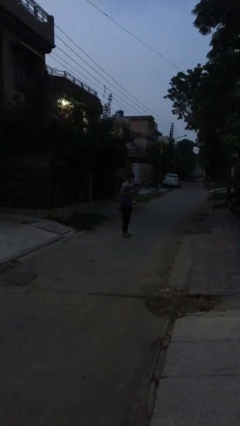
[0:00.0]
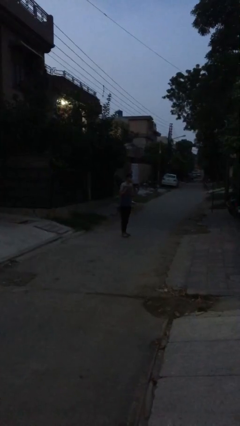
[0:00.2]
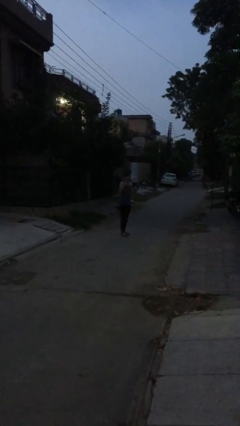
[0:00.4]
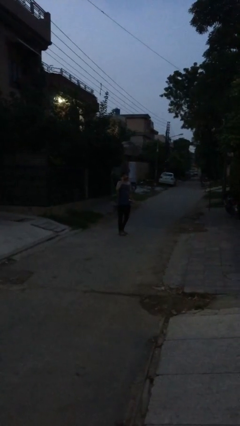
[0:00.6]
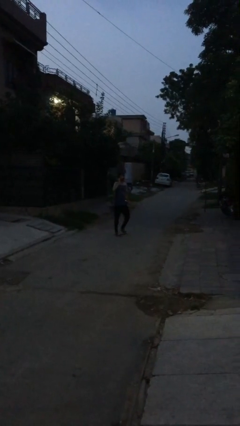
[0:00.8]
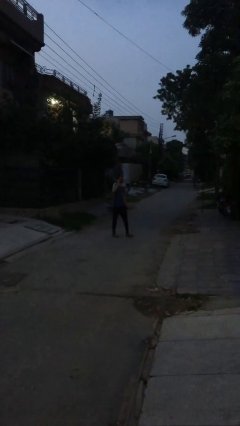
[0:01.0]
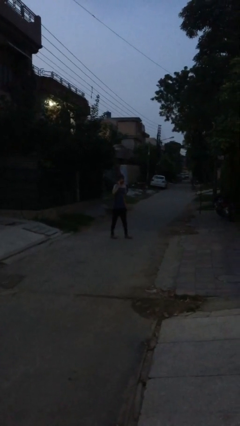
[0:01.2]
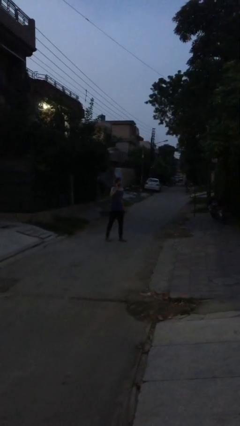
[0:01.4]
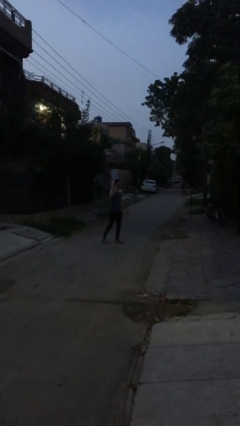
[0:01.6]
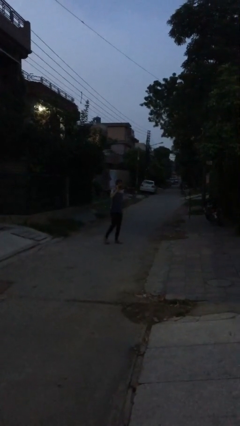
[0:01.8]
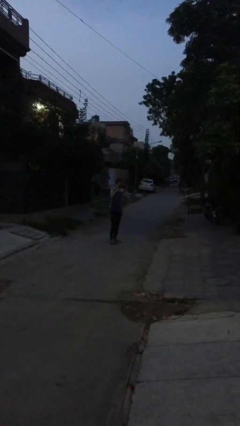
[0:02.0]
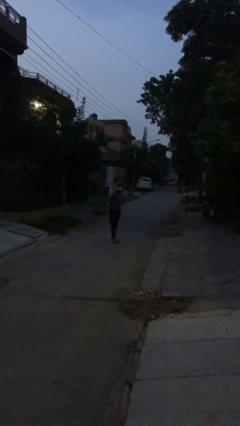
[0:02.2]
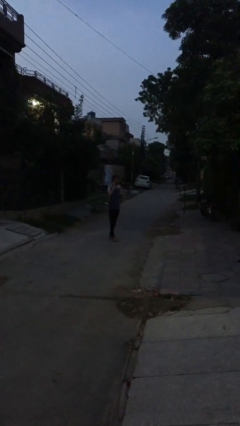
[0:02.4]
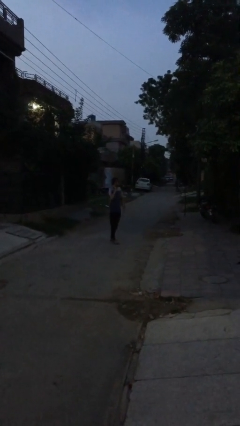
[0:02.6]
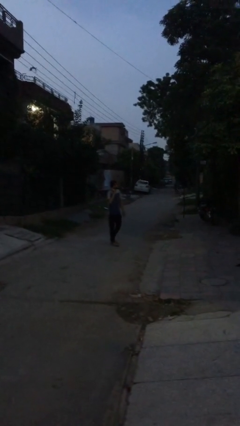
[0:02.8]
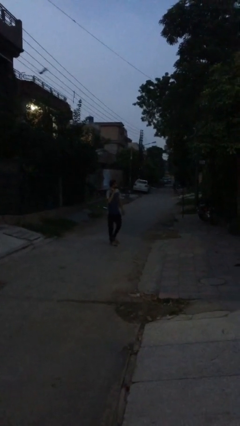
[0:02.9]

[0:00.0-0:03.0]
person talks on phone

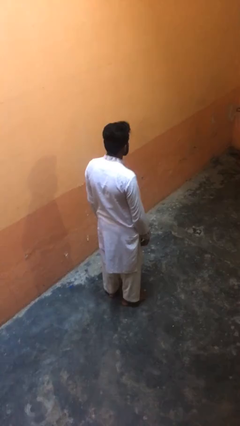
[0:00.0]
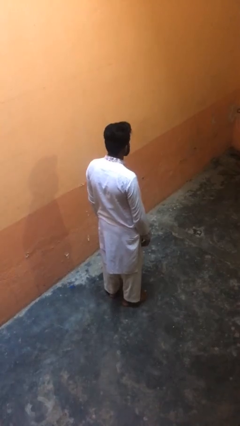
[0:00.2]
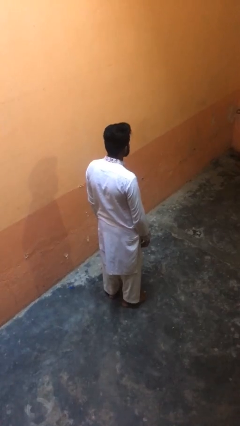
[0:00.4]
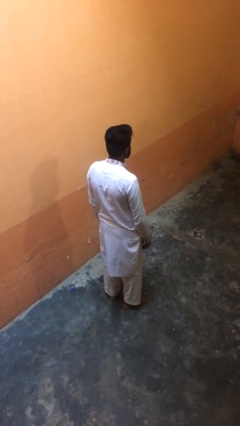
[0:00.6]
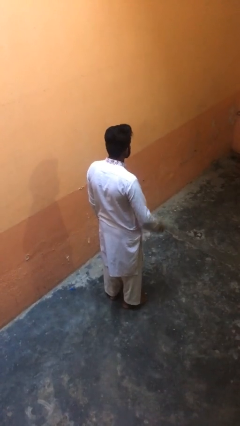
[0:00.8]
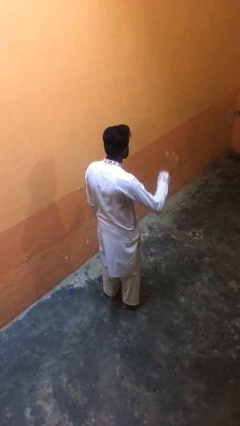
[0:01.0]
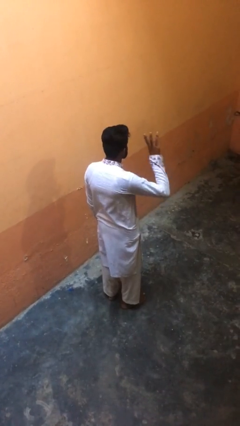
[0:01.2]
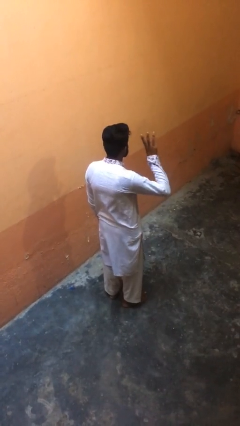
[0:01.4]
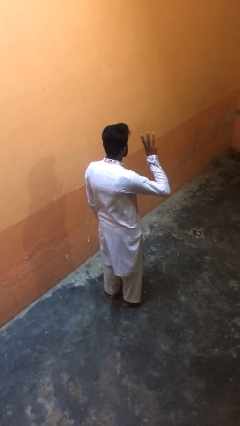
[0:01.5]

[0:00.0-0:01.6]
person gestures number three

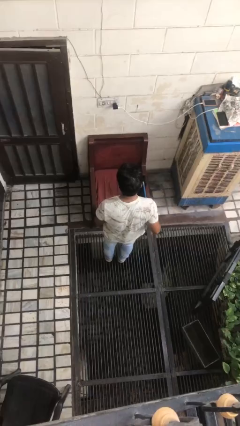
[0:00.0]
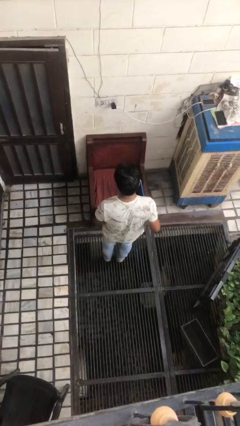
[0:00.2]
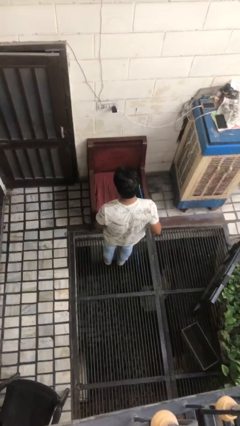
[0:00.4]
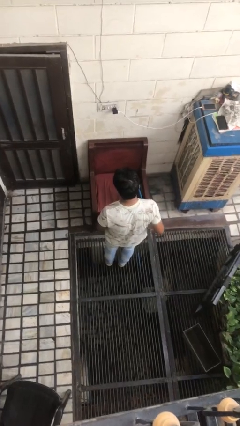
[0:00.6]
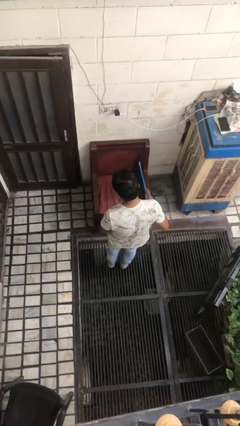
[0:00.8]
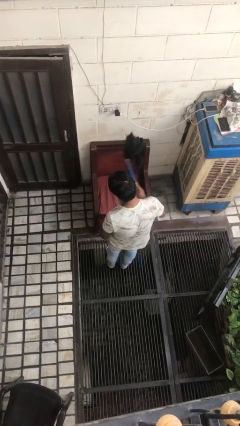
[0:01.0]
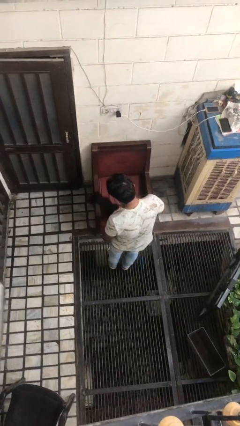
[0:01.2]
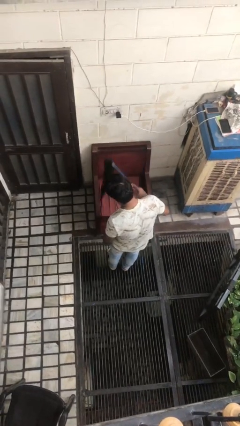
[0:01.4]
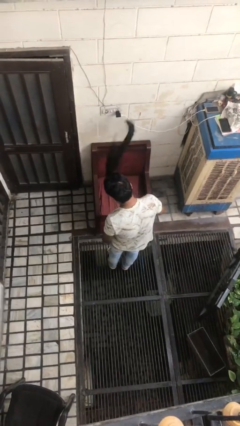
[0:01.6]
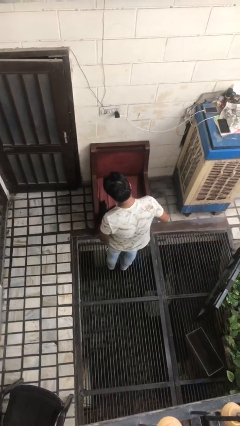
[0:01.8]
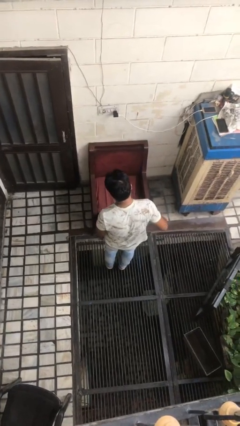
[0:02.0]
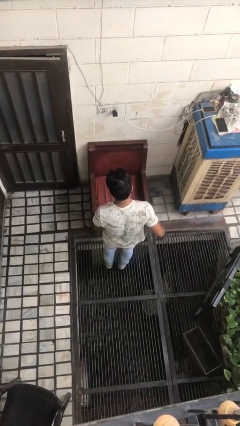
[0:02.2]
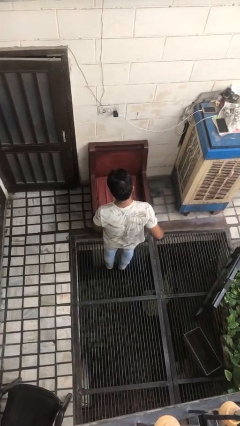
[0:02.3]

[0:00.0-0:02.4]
person dusts furniture

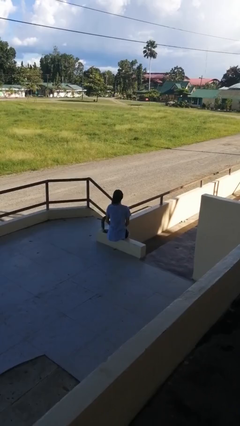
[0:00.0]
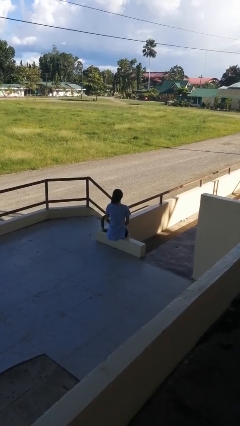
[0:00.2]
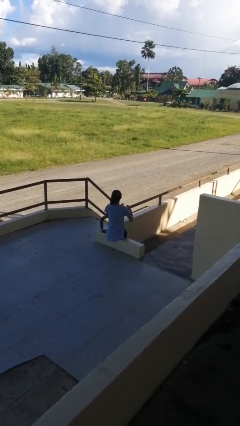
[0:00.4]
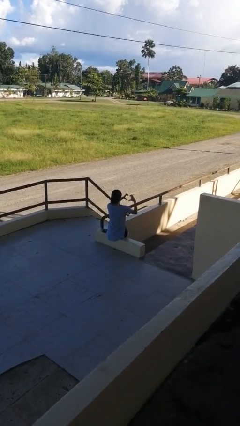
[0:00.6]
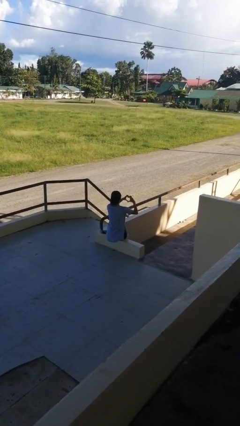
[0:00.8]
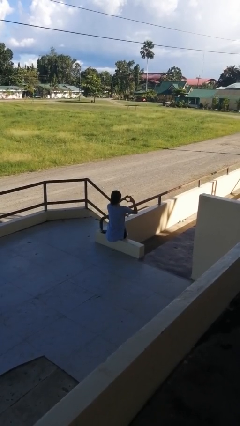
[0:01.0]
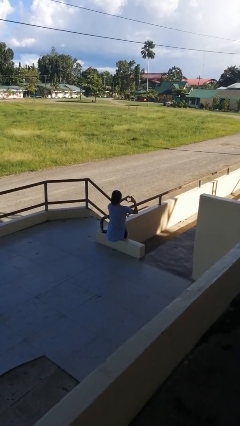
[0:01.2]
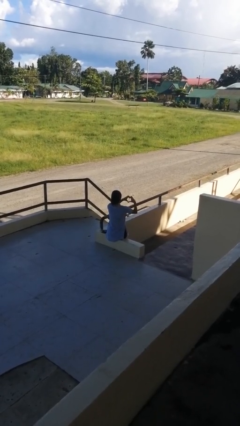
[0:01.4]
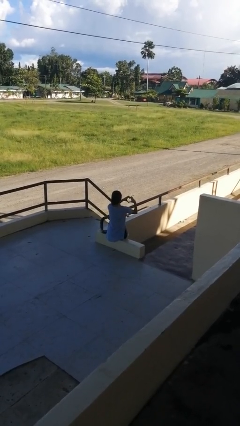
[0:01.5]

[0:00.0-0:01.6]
person gestures heart

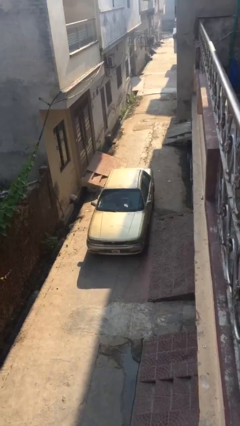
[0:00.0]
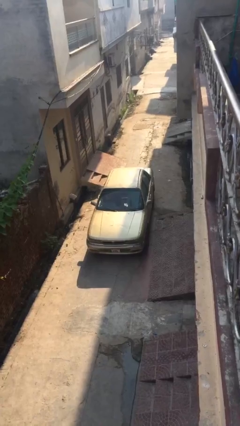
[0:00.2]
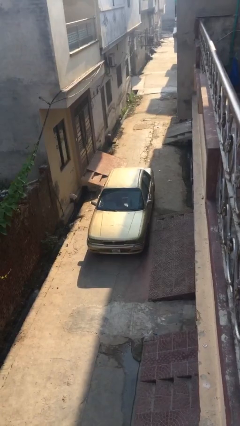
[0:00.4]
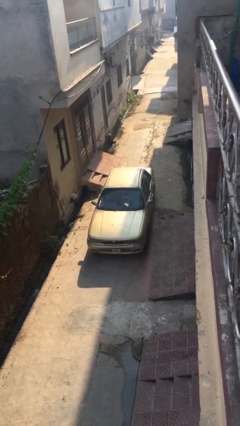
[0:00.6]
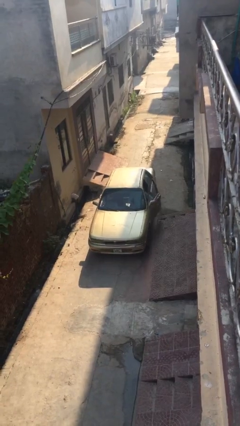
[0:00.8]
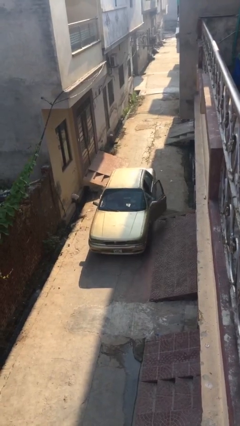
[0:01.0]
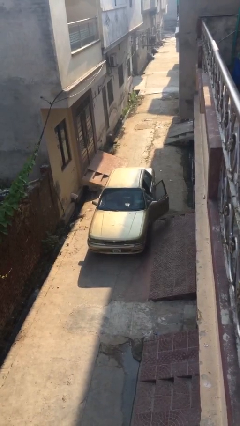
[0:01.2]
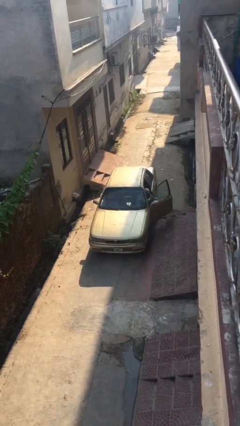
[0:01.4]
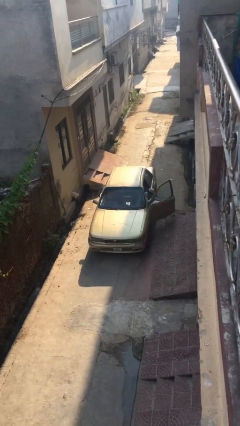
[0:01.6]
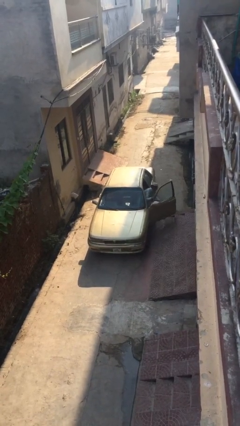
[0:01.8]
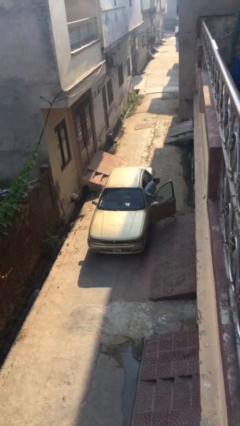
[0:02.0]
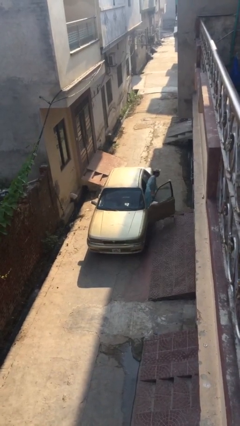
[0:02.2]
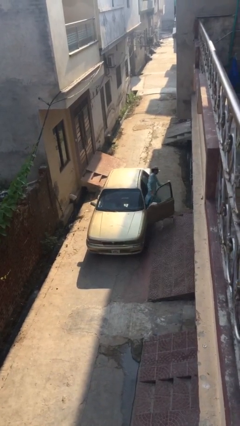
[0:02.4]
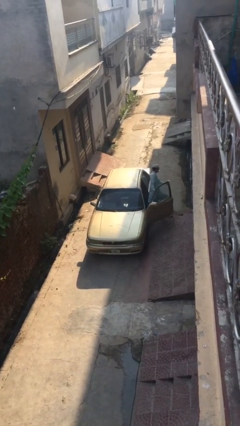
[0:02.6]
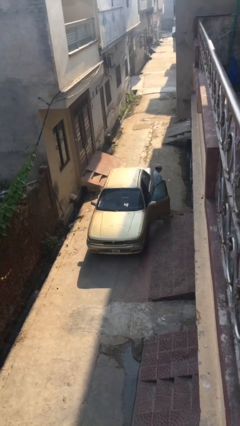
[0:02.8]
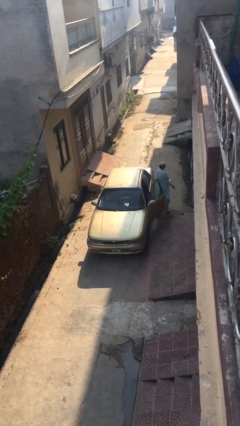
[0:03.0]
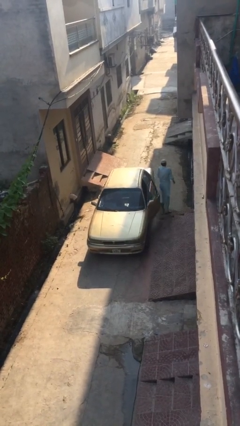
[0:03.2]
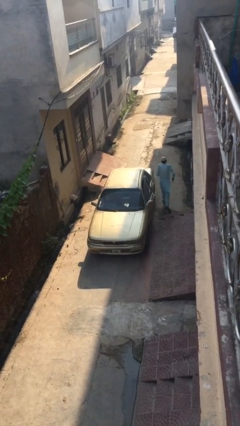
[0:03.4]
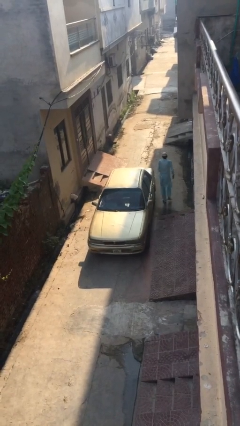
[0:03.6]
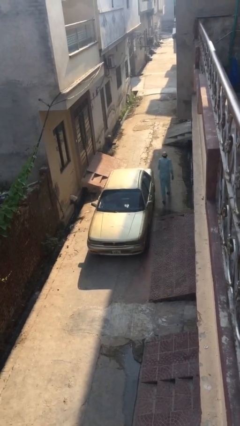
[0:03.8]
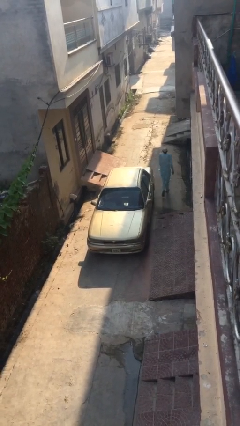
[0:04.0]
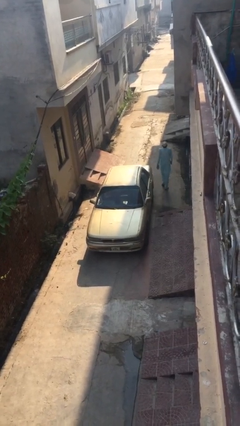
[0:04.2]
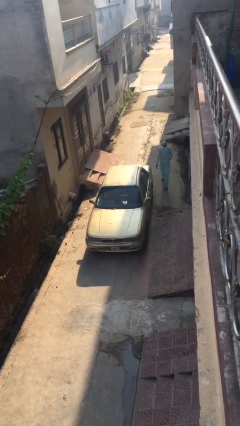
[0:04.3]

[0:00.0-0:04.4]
car drops off person

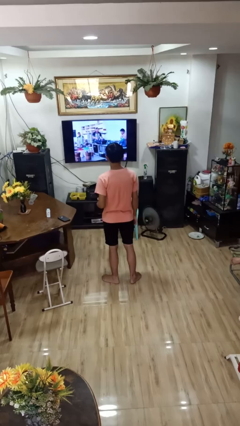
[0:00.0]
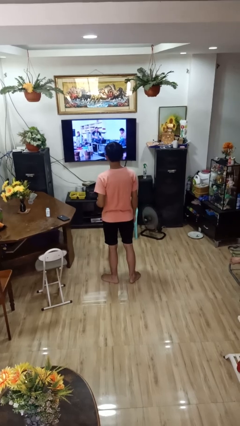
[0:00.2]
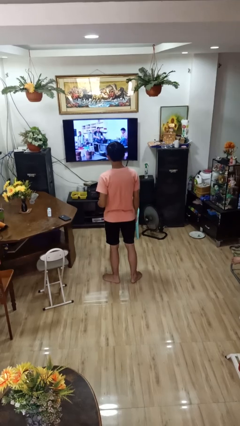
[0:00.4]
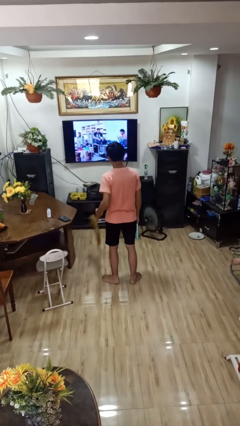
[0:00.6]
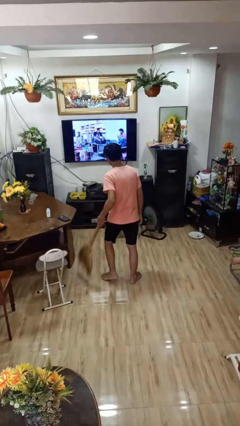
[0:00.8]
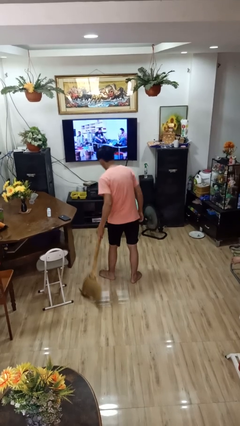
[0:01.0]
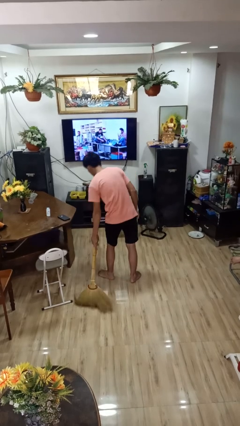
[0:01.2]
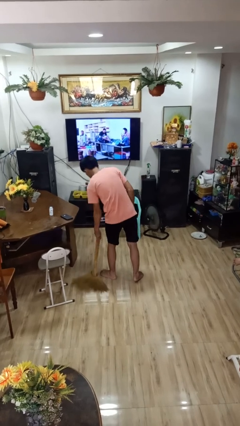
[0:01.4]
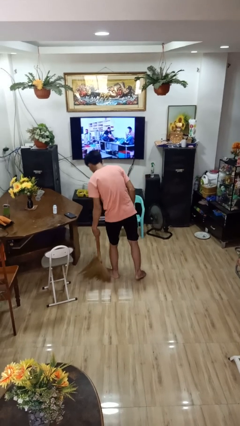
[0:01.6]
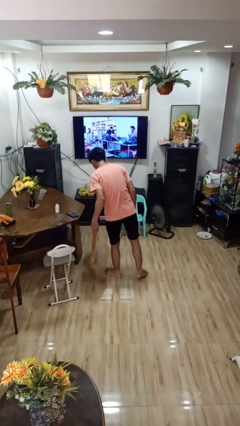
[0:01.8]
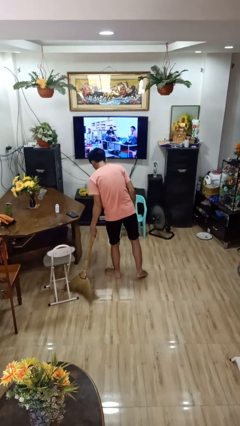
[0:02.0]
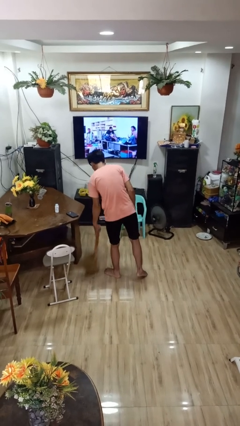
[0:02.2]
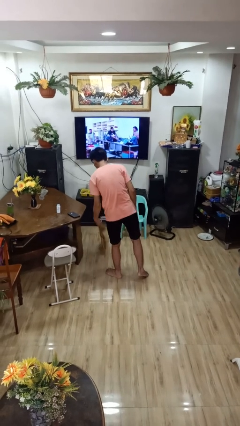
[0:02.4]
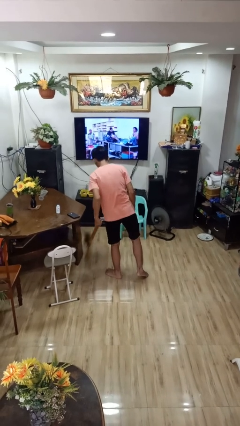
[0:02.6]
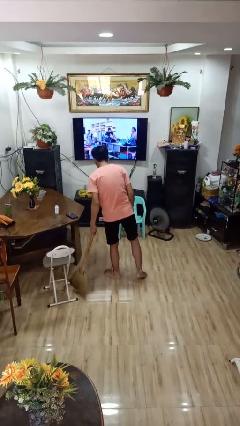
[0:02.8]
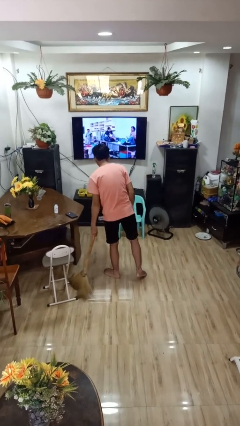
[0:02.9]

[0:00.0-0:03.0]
person sweeps floor

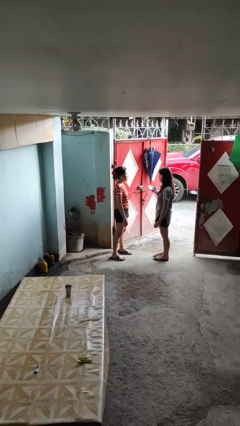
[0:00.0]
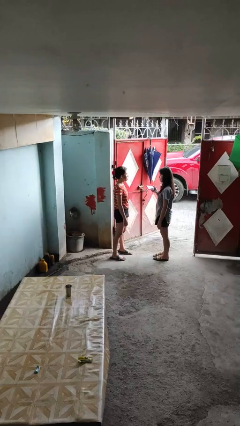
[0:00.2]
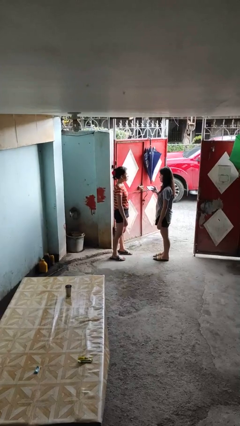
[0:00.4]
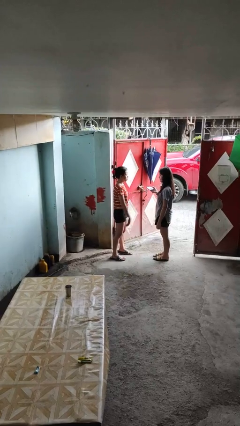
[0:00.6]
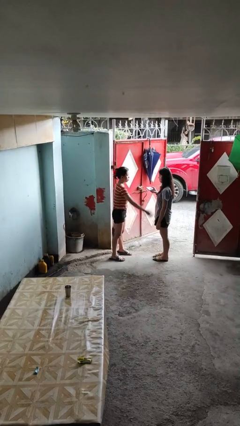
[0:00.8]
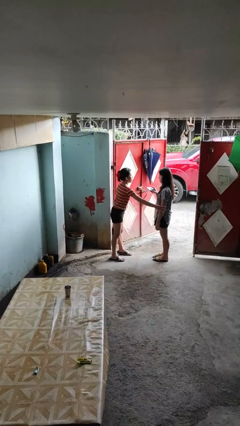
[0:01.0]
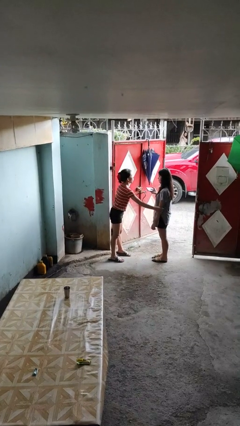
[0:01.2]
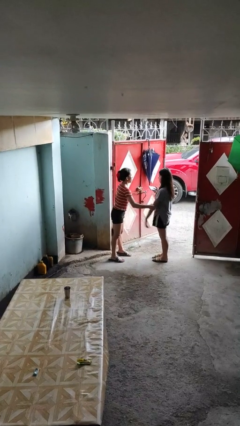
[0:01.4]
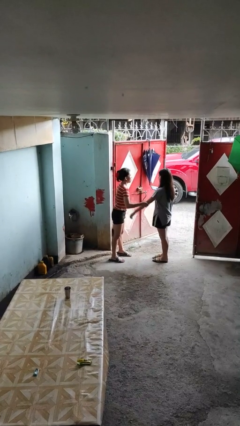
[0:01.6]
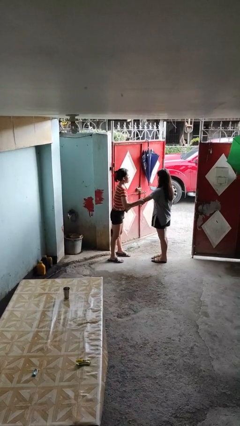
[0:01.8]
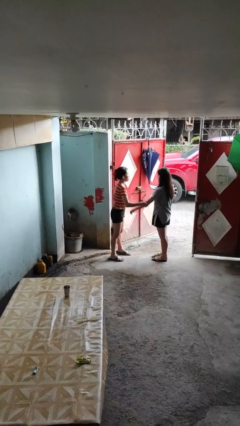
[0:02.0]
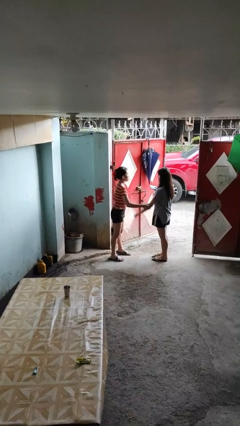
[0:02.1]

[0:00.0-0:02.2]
person grabs person by forearm
